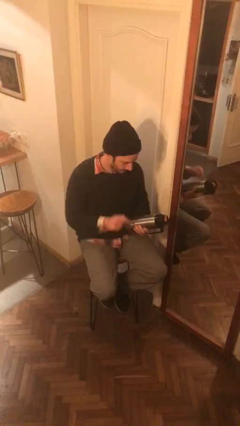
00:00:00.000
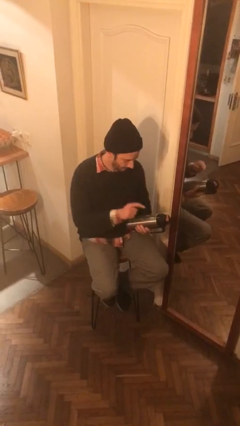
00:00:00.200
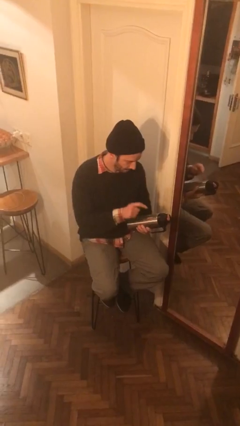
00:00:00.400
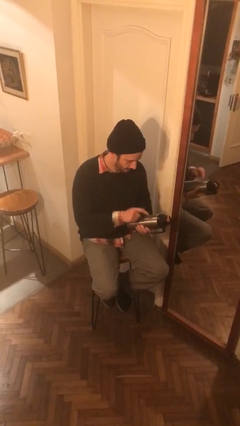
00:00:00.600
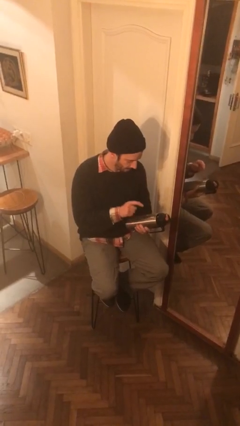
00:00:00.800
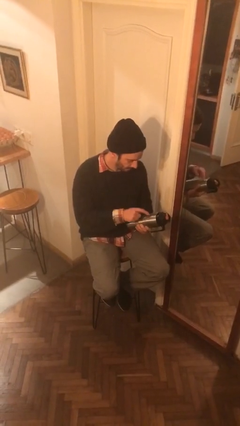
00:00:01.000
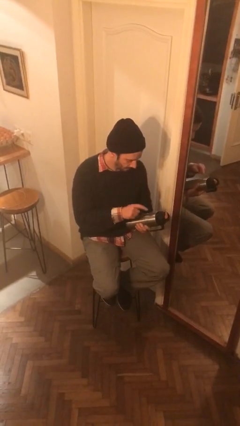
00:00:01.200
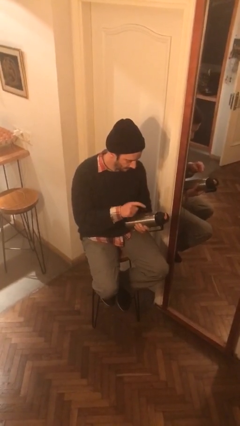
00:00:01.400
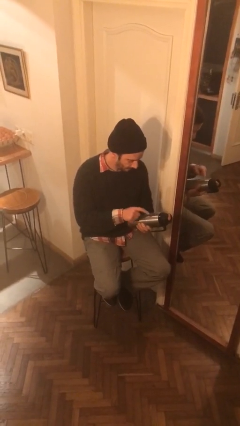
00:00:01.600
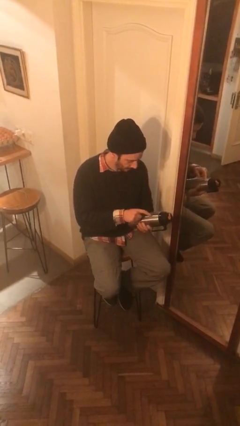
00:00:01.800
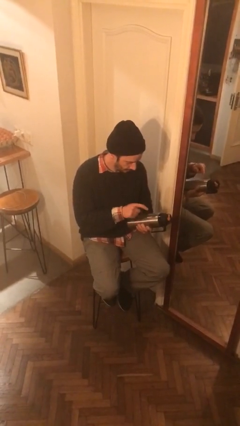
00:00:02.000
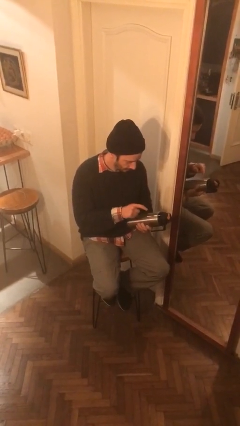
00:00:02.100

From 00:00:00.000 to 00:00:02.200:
person taps object with finger

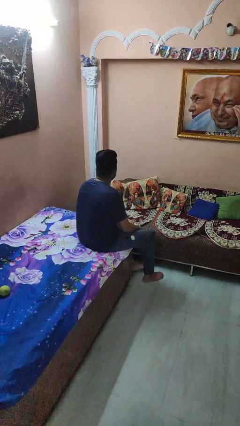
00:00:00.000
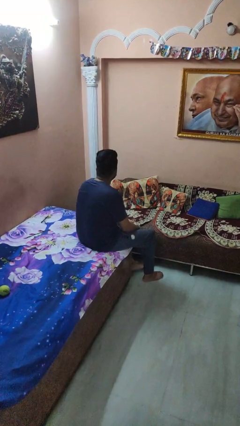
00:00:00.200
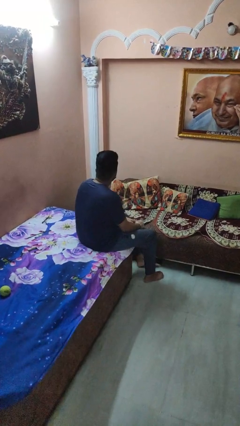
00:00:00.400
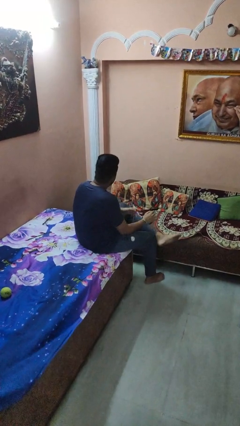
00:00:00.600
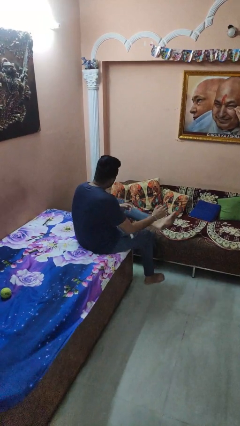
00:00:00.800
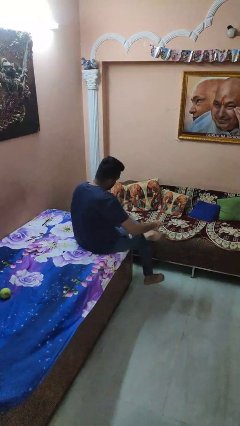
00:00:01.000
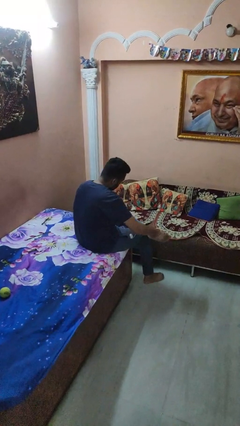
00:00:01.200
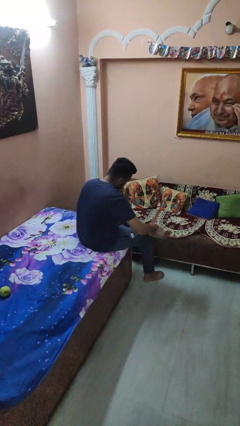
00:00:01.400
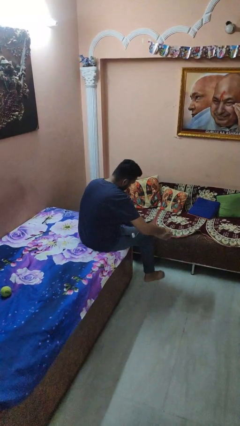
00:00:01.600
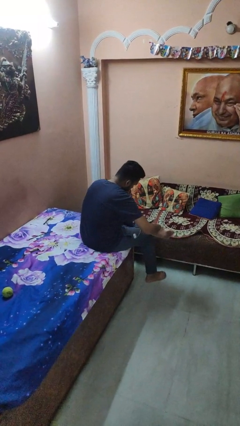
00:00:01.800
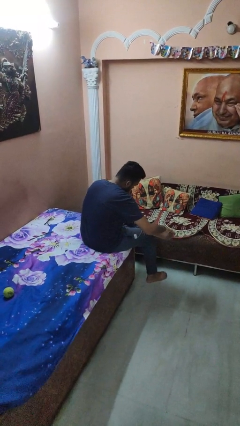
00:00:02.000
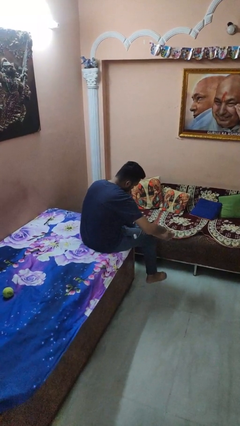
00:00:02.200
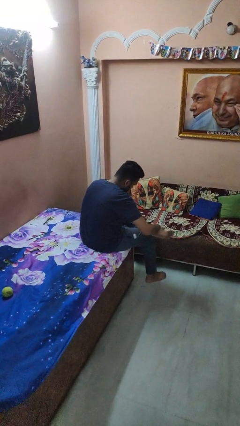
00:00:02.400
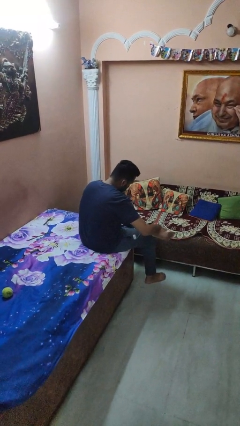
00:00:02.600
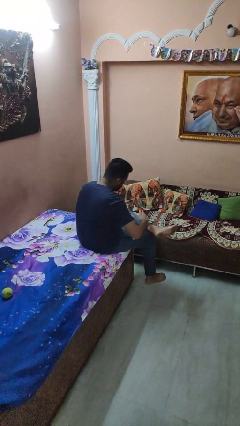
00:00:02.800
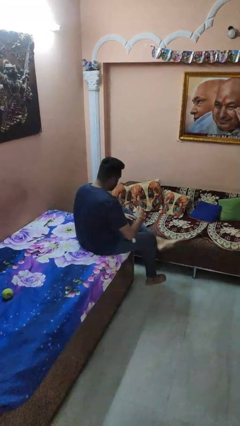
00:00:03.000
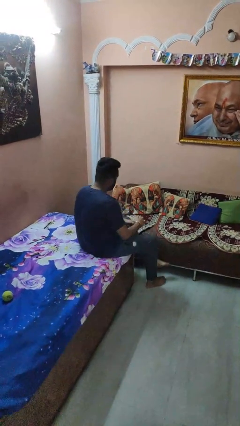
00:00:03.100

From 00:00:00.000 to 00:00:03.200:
person rubs foot

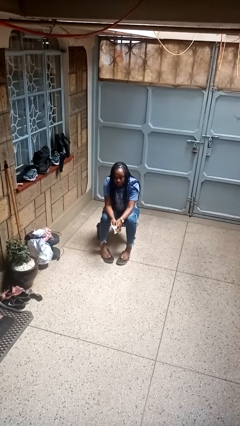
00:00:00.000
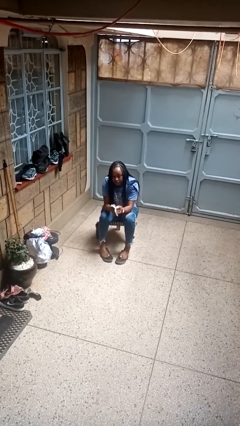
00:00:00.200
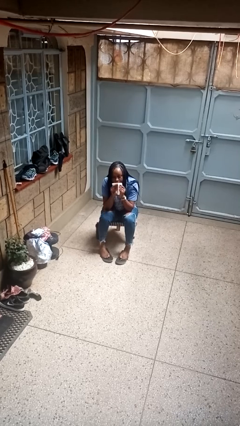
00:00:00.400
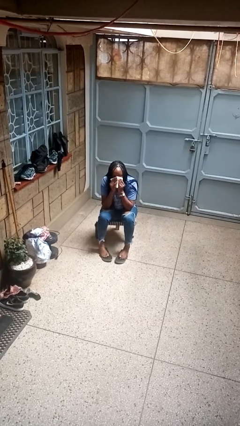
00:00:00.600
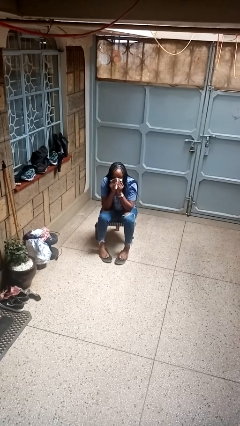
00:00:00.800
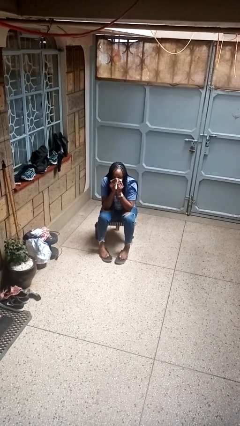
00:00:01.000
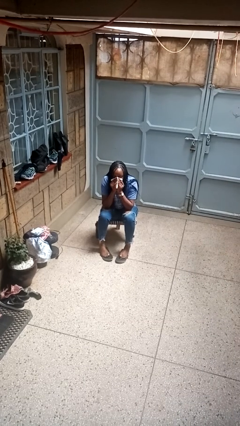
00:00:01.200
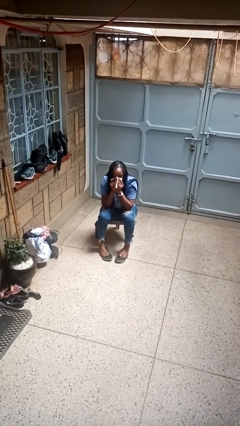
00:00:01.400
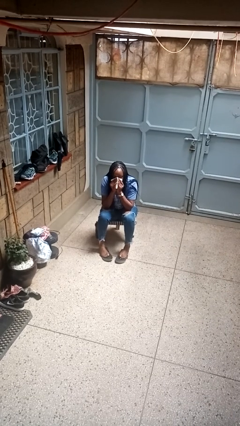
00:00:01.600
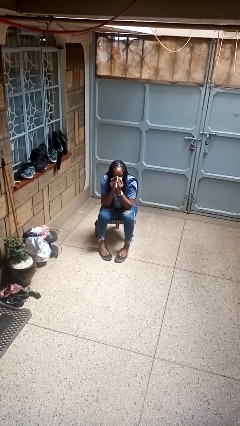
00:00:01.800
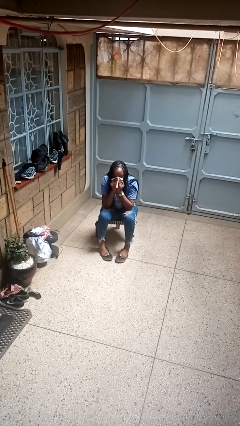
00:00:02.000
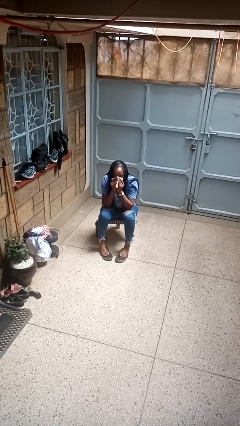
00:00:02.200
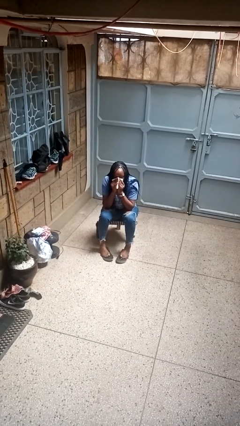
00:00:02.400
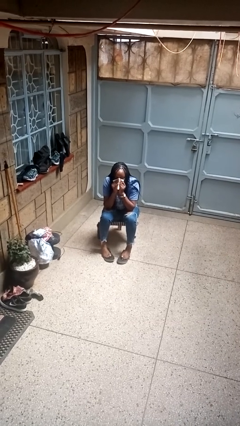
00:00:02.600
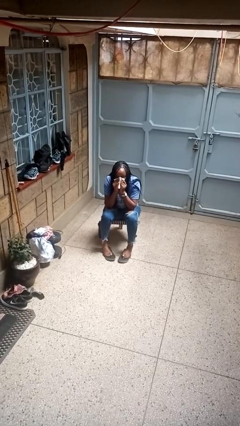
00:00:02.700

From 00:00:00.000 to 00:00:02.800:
person blows nose

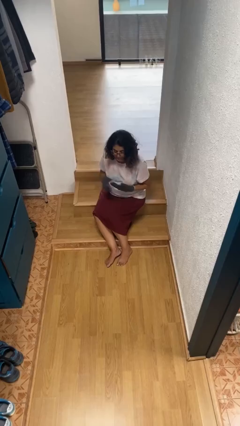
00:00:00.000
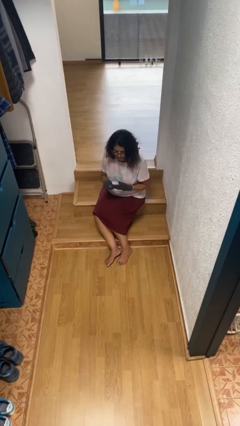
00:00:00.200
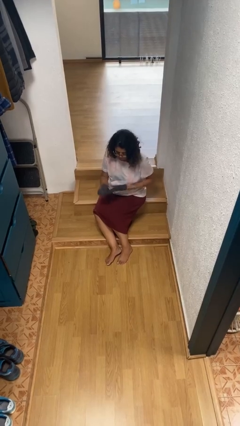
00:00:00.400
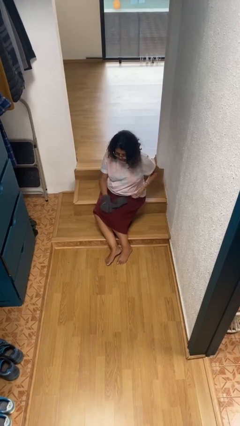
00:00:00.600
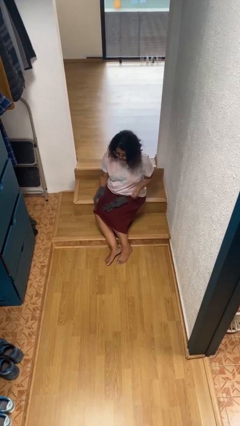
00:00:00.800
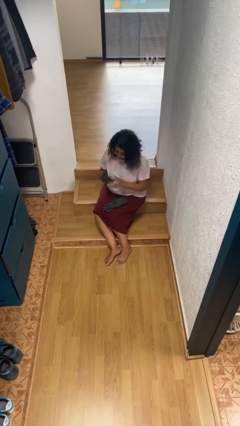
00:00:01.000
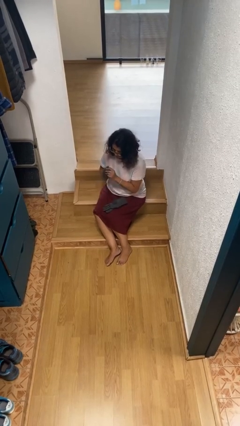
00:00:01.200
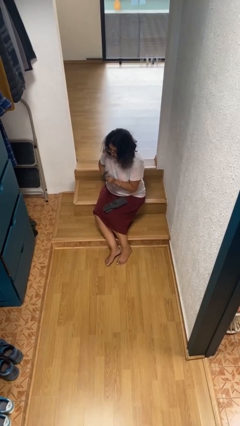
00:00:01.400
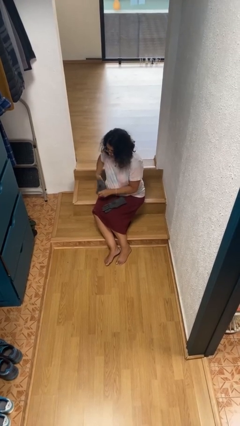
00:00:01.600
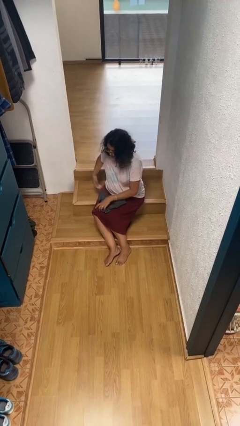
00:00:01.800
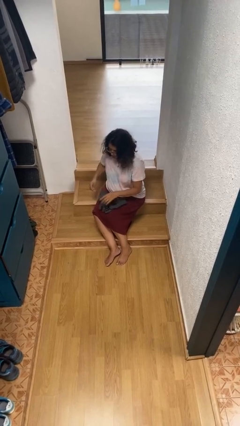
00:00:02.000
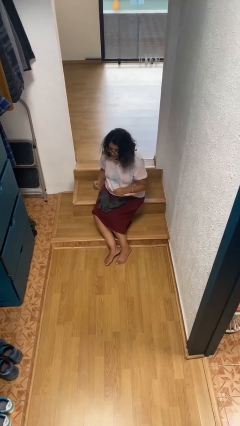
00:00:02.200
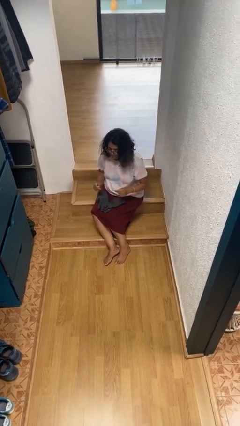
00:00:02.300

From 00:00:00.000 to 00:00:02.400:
person takes off gloves

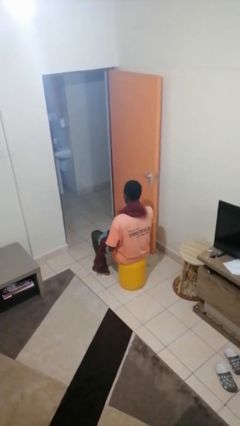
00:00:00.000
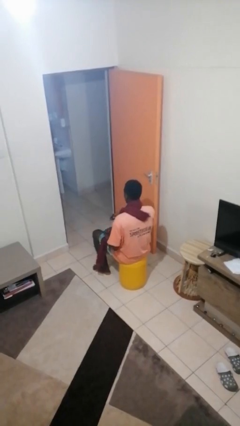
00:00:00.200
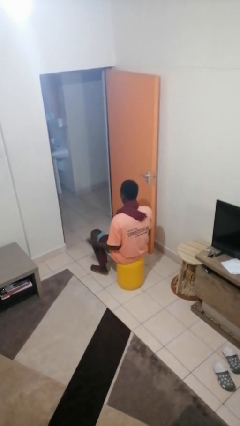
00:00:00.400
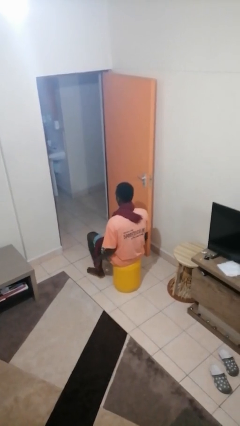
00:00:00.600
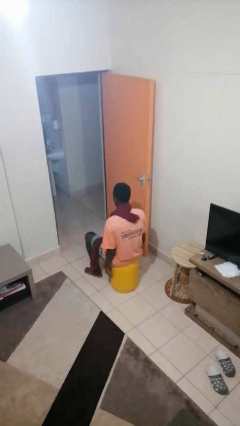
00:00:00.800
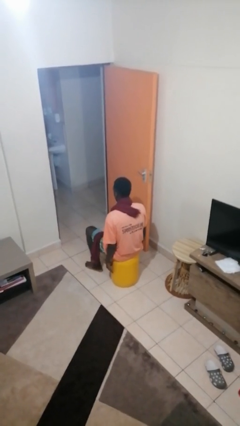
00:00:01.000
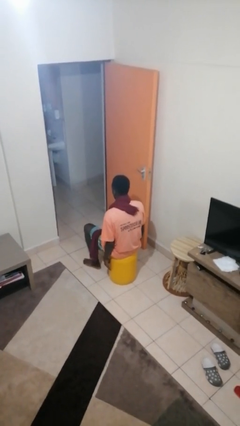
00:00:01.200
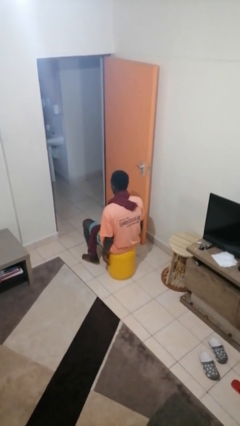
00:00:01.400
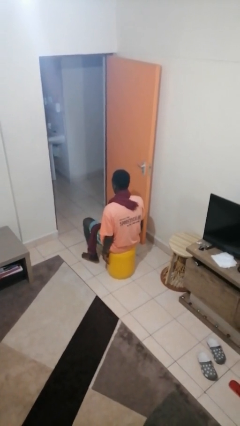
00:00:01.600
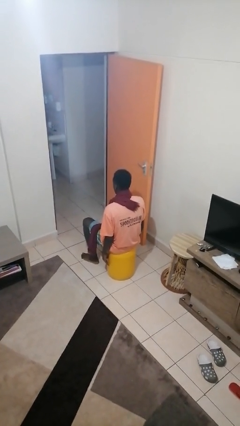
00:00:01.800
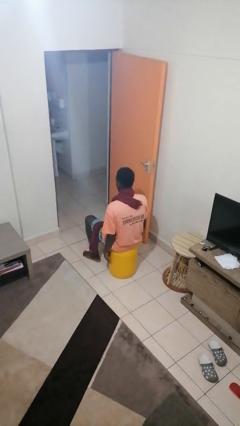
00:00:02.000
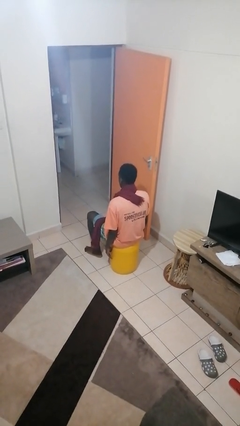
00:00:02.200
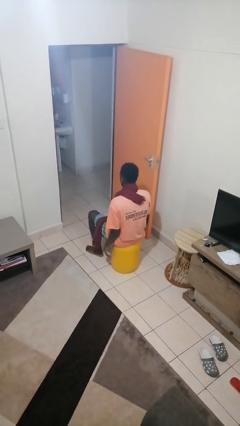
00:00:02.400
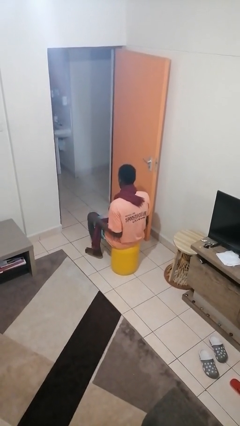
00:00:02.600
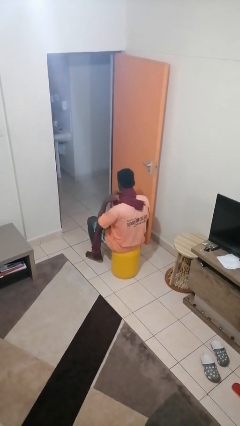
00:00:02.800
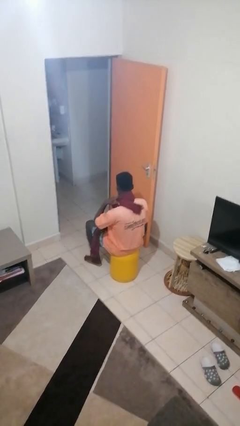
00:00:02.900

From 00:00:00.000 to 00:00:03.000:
person puts on scarf

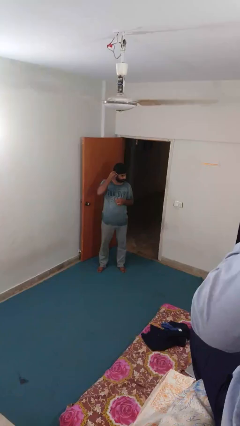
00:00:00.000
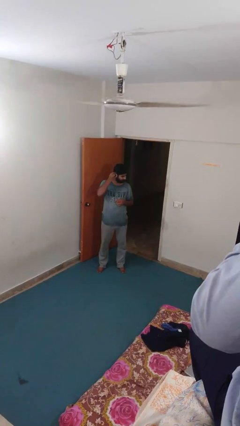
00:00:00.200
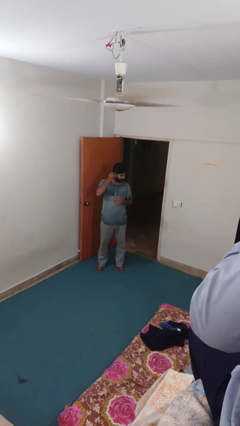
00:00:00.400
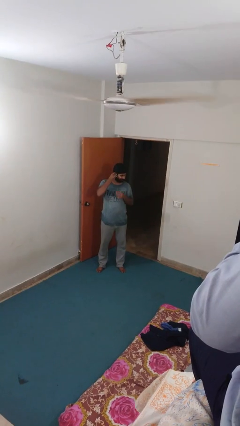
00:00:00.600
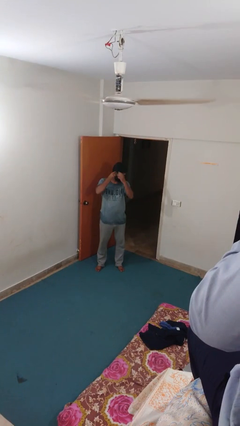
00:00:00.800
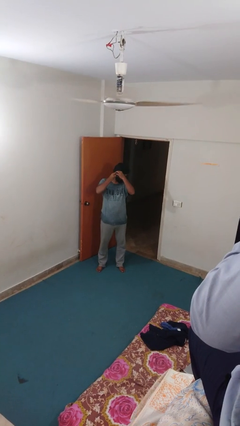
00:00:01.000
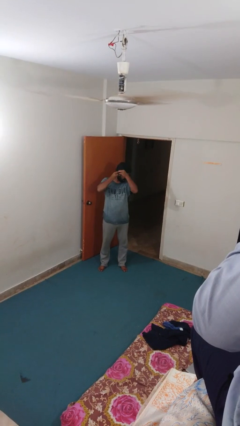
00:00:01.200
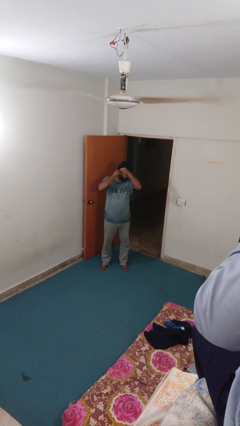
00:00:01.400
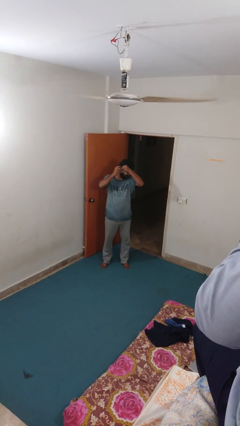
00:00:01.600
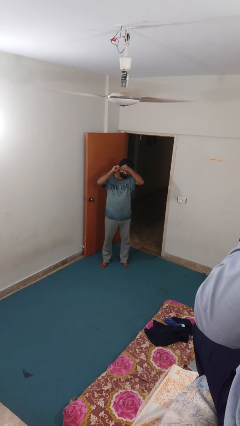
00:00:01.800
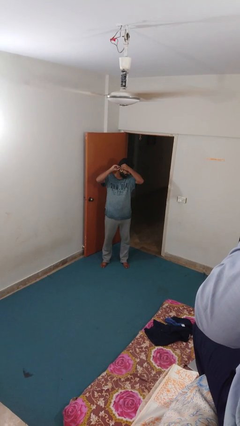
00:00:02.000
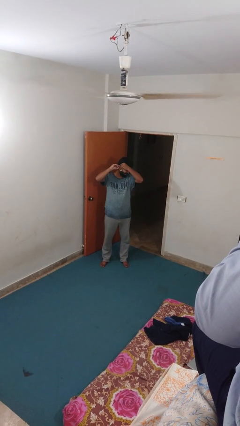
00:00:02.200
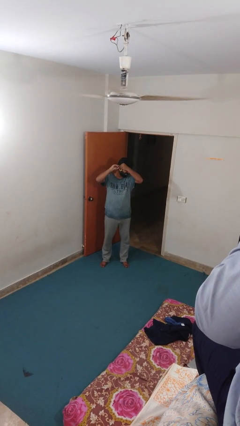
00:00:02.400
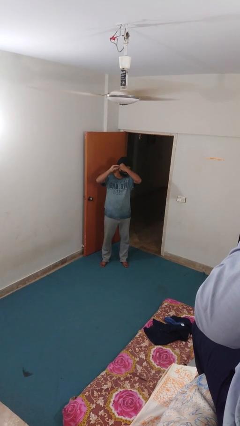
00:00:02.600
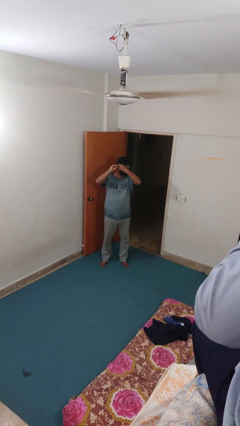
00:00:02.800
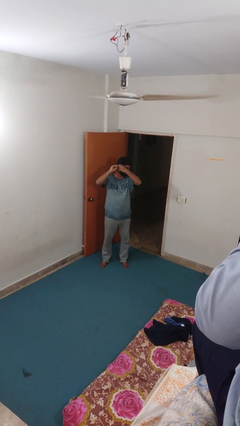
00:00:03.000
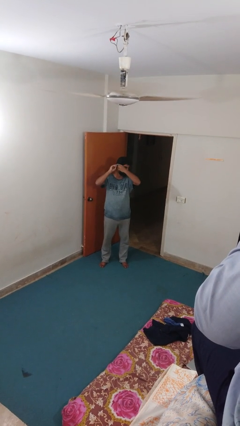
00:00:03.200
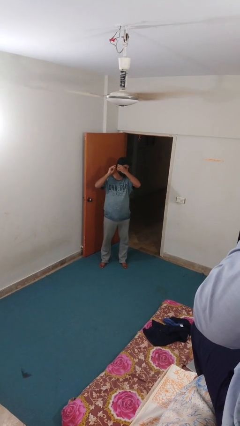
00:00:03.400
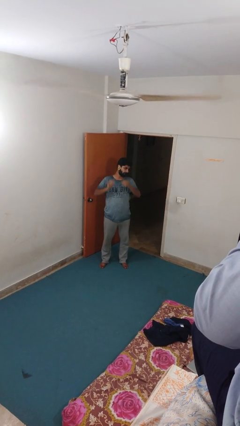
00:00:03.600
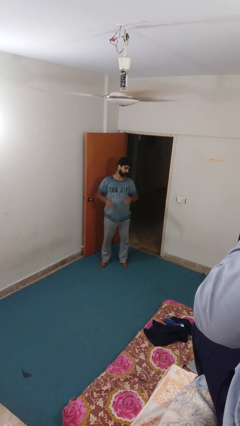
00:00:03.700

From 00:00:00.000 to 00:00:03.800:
person puts on earrings
